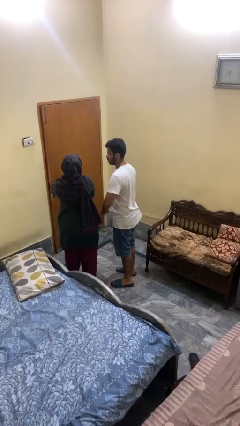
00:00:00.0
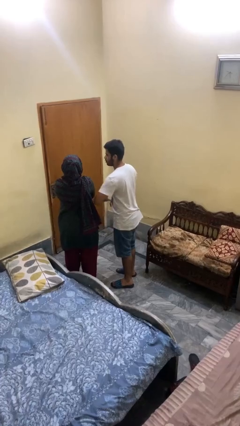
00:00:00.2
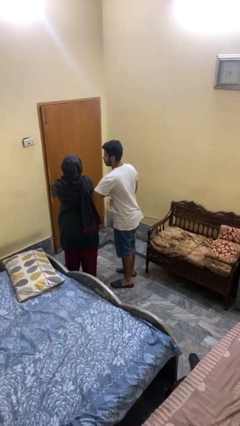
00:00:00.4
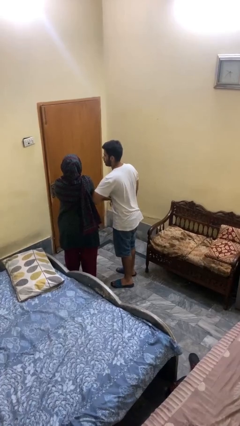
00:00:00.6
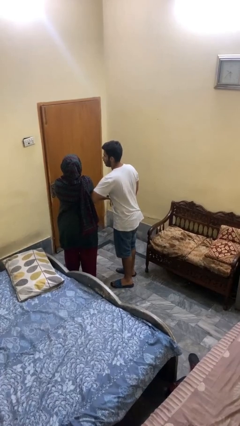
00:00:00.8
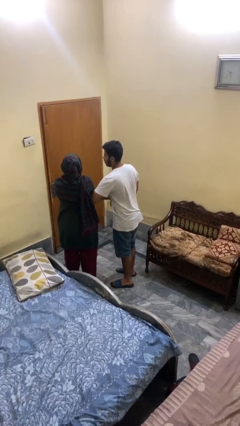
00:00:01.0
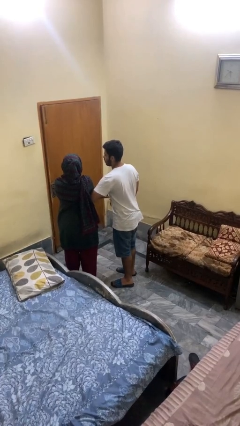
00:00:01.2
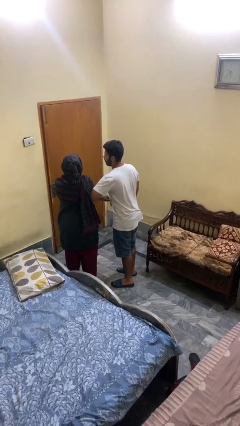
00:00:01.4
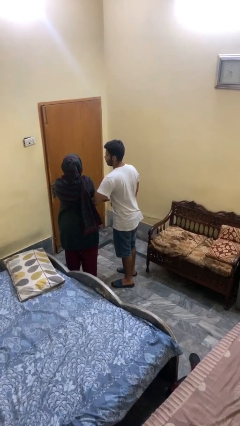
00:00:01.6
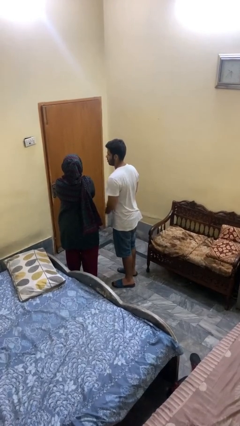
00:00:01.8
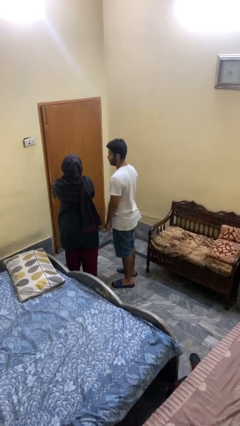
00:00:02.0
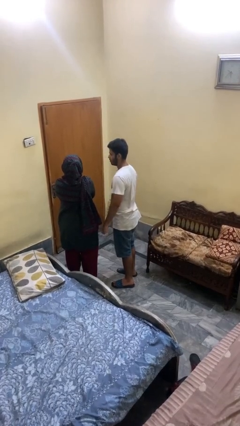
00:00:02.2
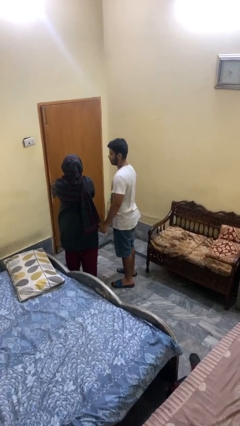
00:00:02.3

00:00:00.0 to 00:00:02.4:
person nudges person with elbow

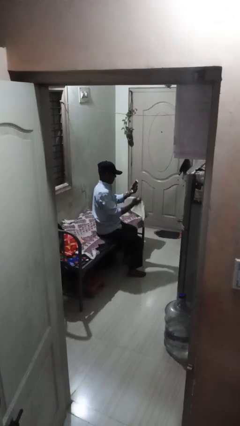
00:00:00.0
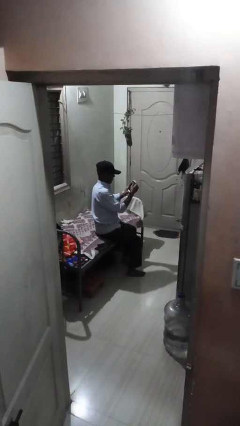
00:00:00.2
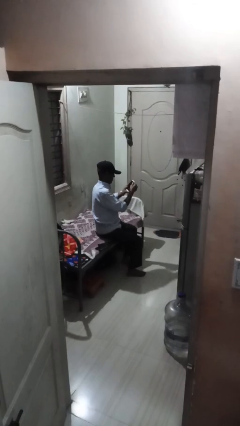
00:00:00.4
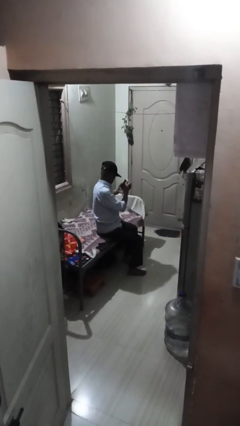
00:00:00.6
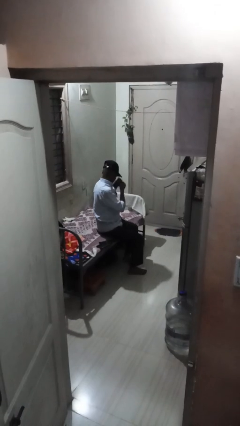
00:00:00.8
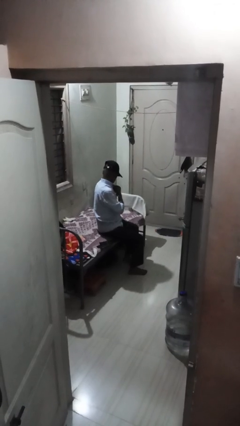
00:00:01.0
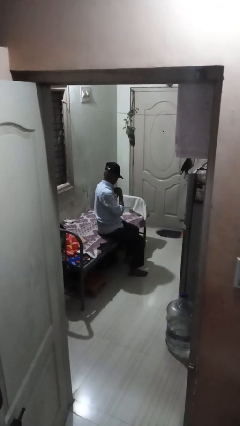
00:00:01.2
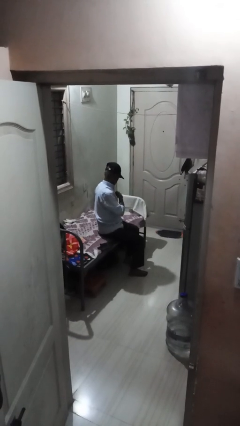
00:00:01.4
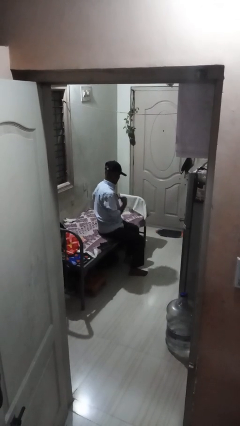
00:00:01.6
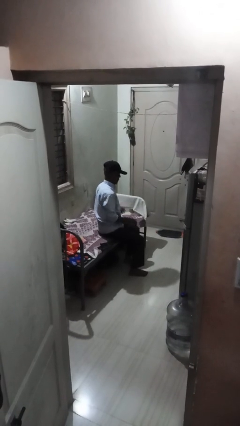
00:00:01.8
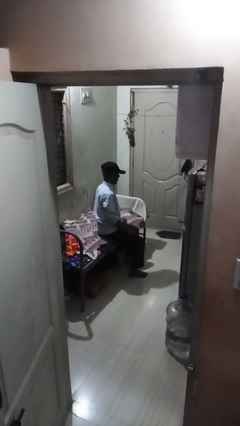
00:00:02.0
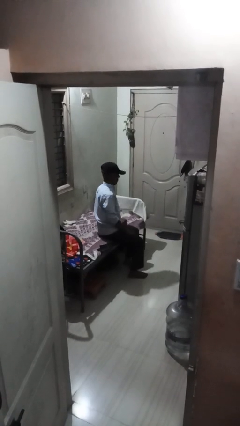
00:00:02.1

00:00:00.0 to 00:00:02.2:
person puts phone into pocket

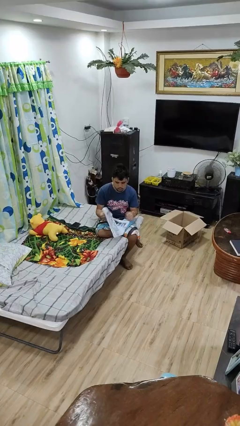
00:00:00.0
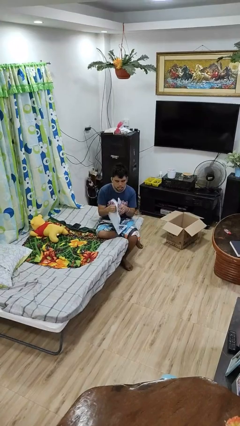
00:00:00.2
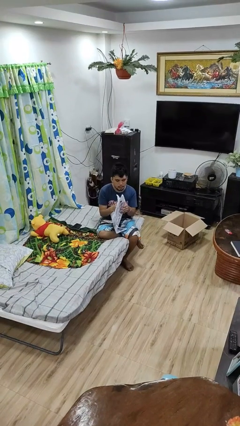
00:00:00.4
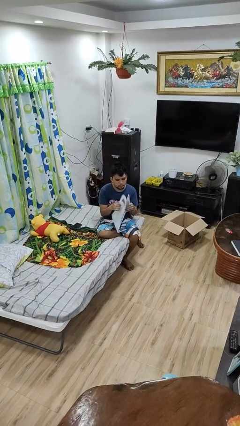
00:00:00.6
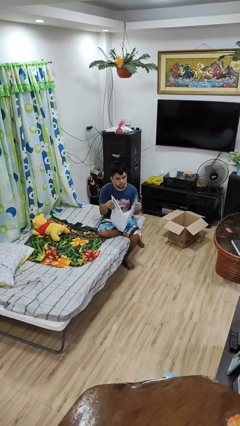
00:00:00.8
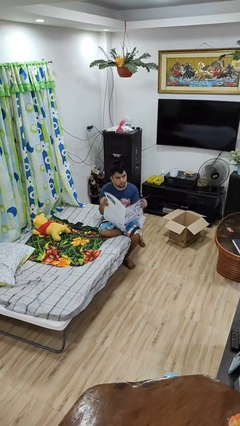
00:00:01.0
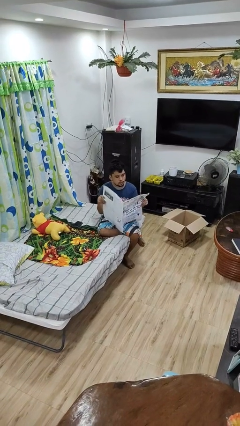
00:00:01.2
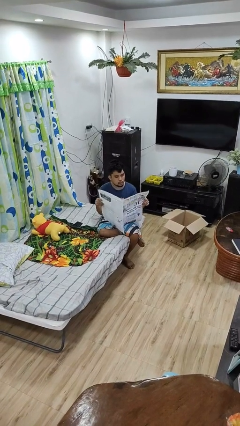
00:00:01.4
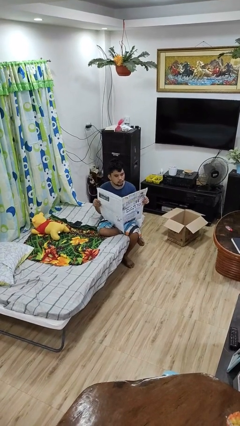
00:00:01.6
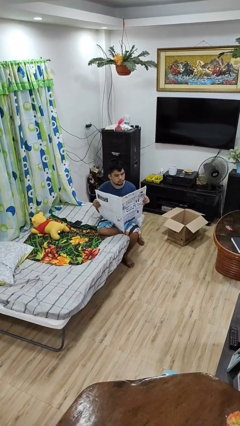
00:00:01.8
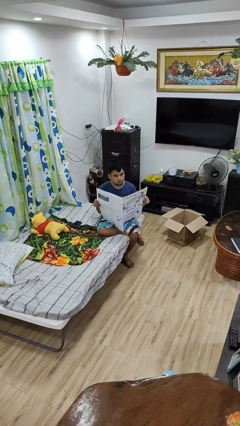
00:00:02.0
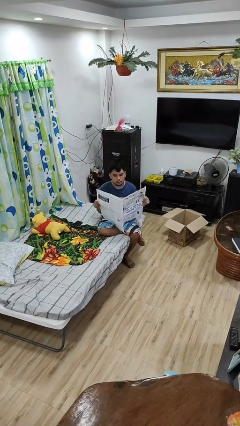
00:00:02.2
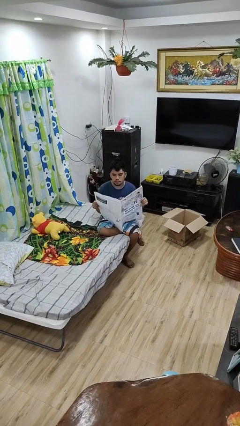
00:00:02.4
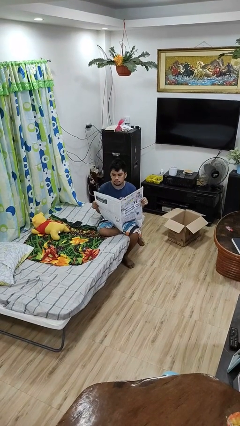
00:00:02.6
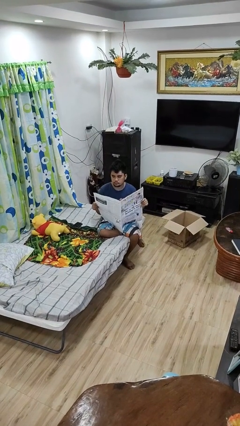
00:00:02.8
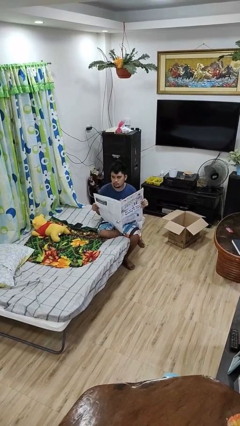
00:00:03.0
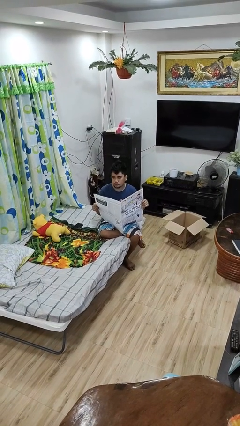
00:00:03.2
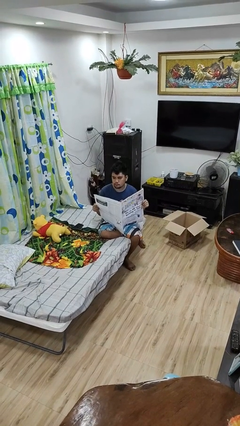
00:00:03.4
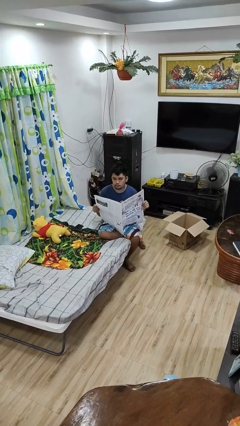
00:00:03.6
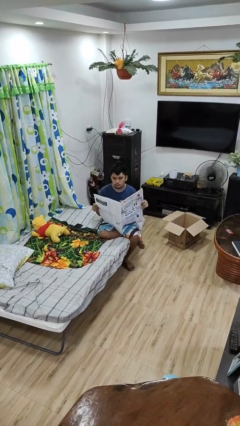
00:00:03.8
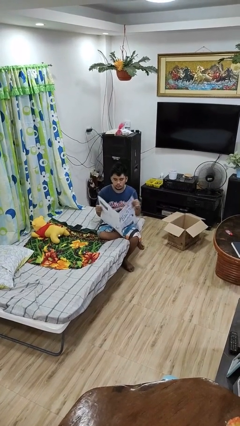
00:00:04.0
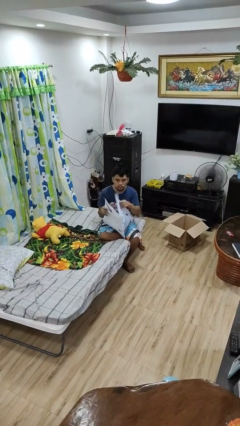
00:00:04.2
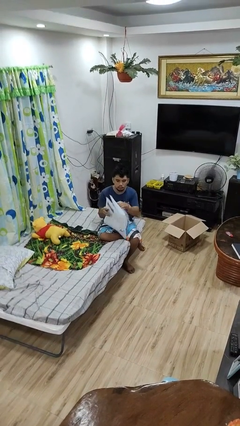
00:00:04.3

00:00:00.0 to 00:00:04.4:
person reads newspaper

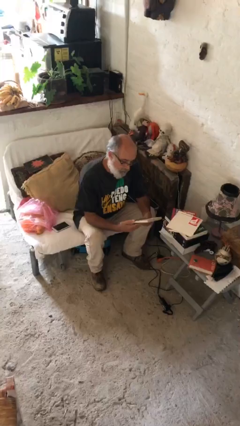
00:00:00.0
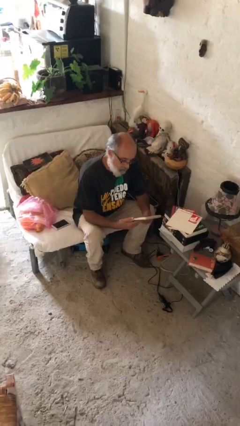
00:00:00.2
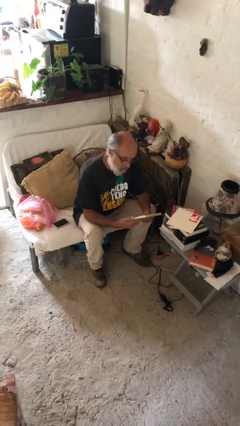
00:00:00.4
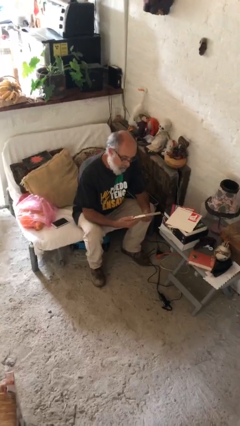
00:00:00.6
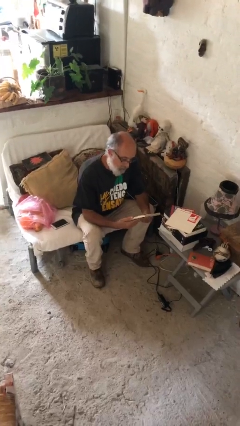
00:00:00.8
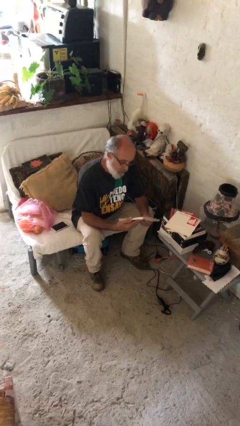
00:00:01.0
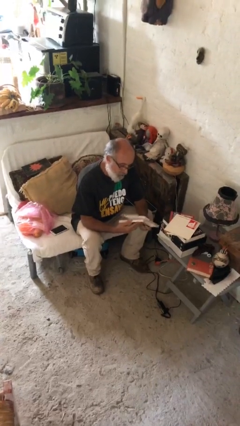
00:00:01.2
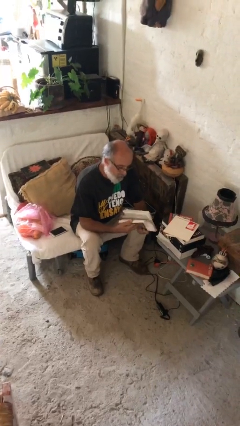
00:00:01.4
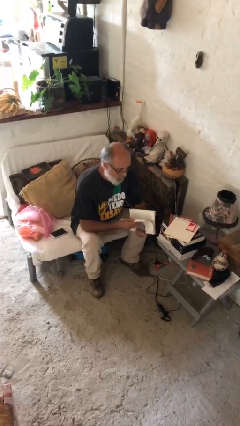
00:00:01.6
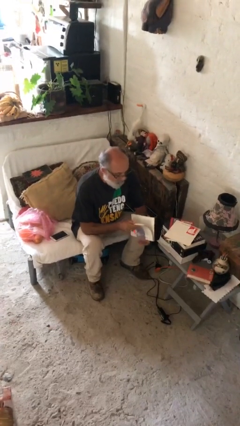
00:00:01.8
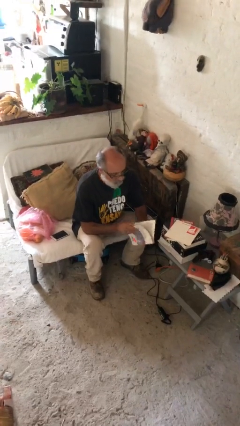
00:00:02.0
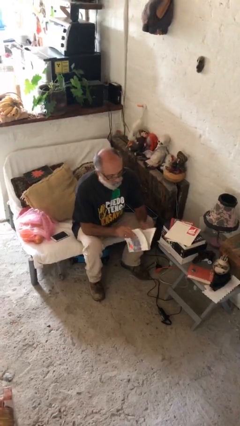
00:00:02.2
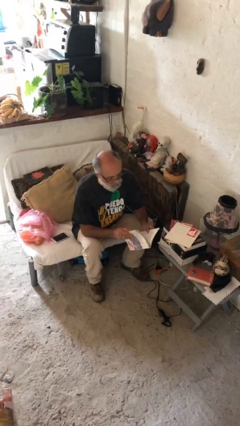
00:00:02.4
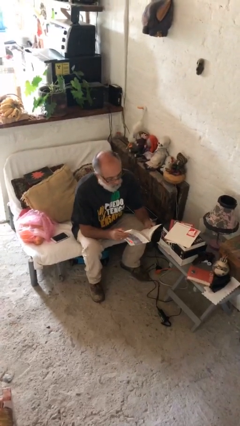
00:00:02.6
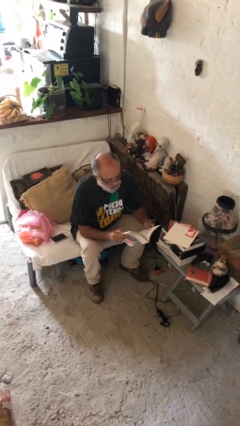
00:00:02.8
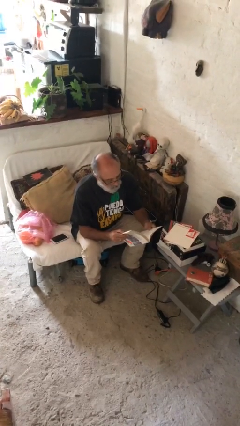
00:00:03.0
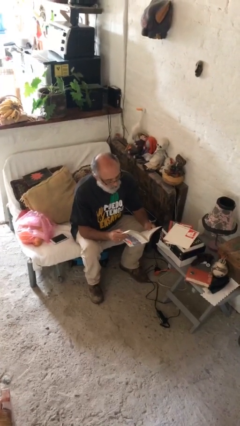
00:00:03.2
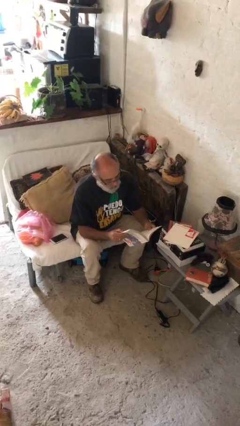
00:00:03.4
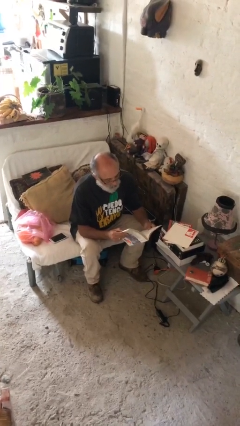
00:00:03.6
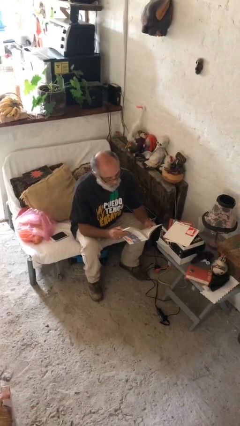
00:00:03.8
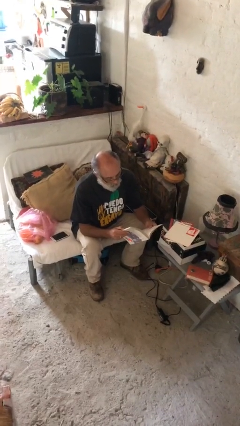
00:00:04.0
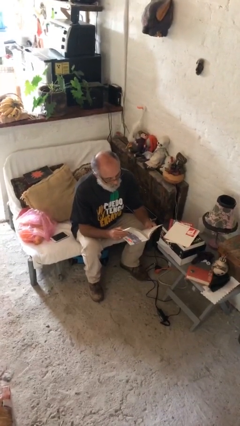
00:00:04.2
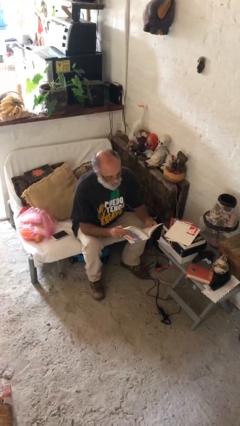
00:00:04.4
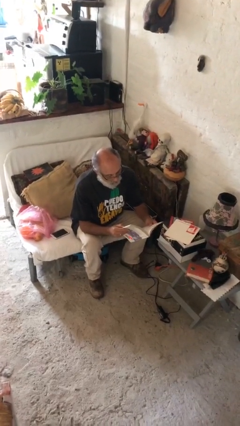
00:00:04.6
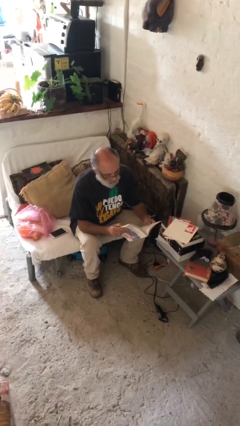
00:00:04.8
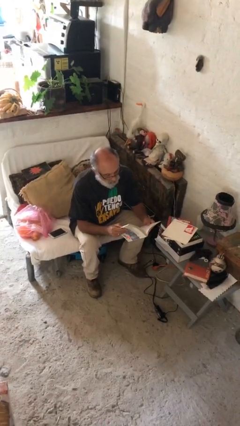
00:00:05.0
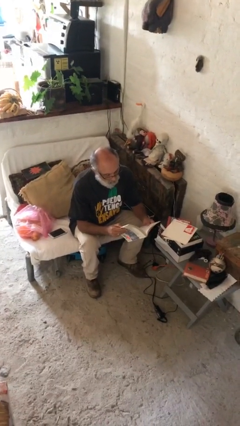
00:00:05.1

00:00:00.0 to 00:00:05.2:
person reads document

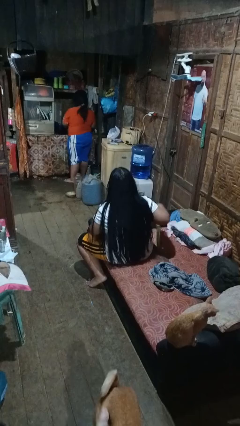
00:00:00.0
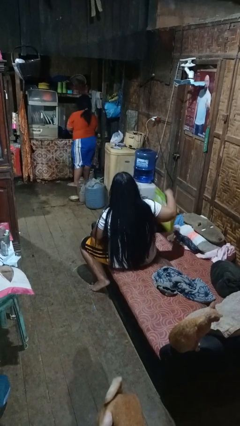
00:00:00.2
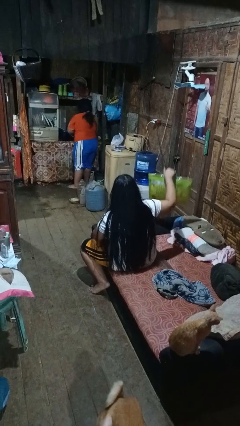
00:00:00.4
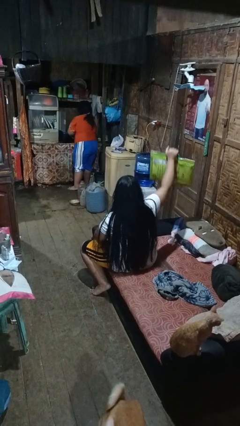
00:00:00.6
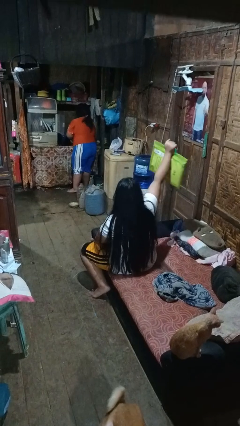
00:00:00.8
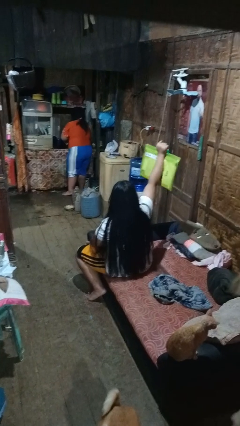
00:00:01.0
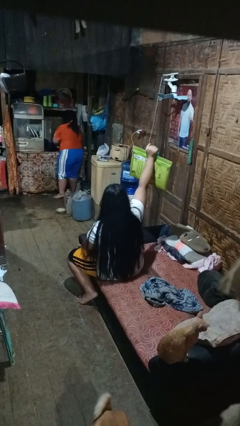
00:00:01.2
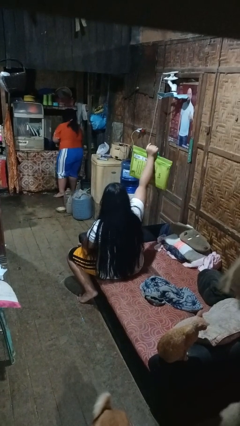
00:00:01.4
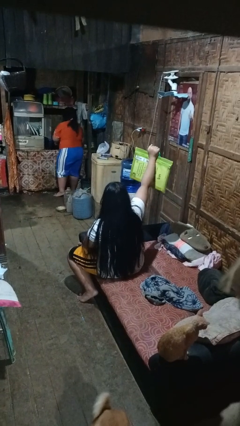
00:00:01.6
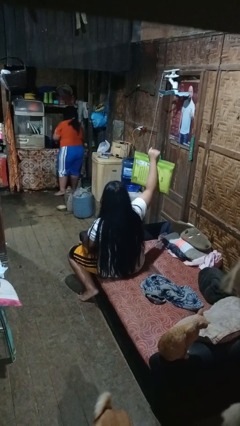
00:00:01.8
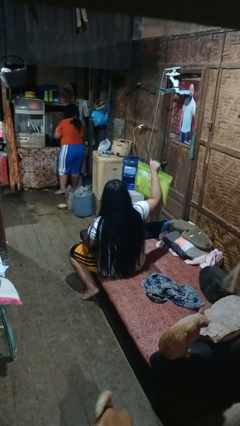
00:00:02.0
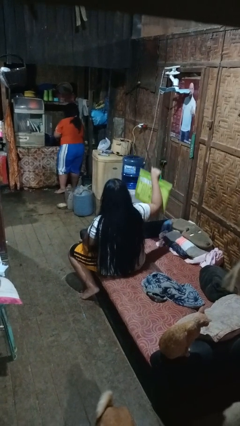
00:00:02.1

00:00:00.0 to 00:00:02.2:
person holds object above head

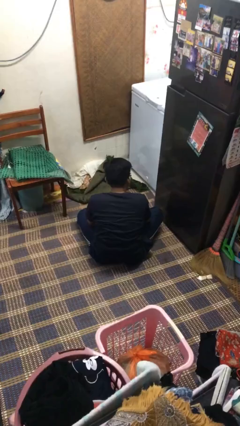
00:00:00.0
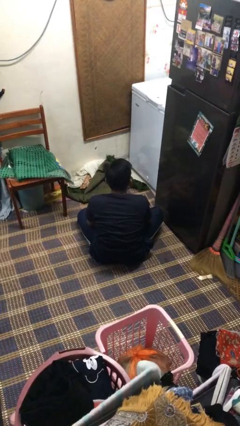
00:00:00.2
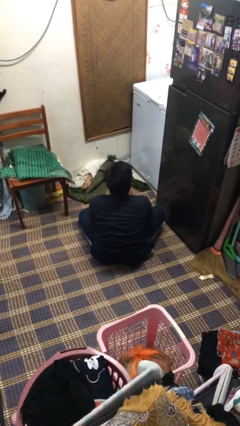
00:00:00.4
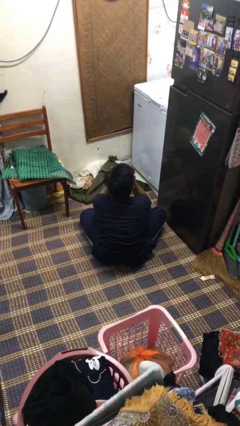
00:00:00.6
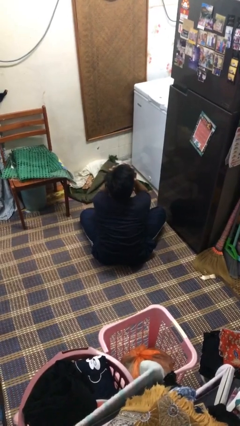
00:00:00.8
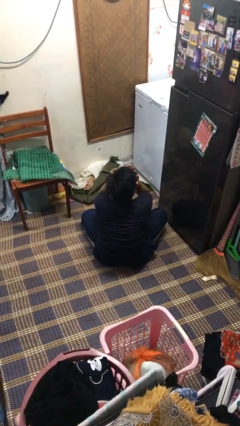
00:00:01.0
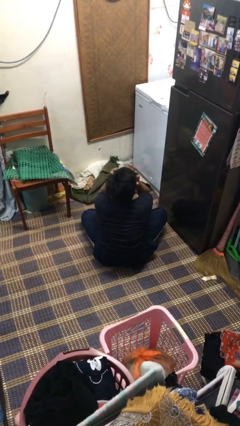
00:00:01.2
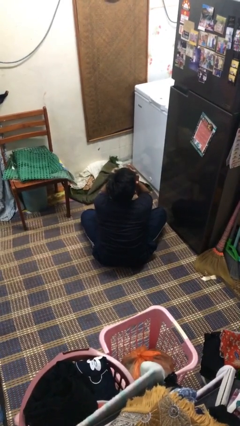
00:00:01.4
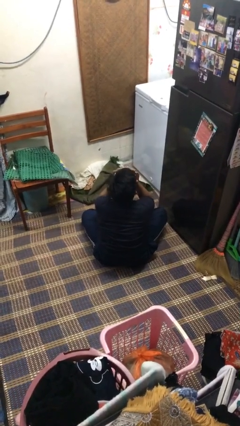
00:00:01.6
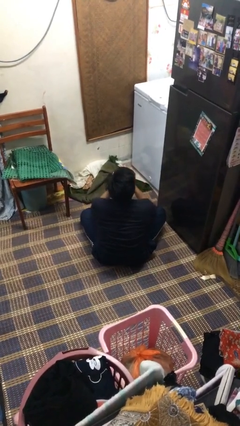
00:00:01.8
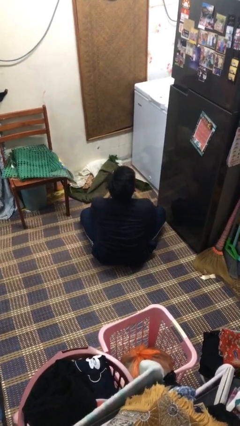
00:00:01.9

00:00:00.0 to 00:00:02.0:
person covers face with hands
